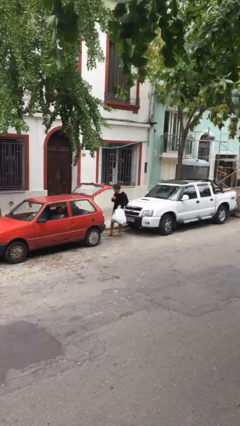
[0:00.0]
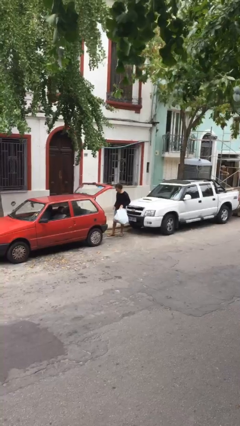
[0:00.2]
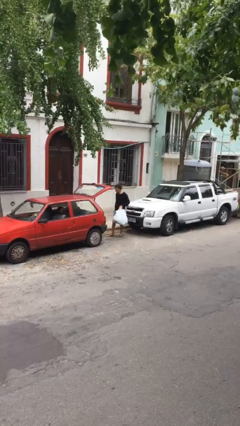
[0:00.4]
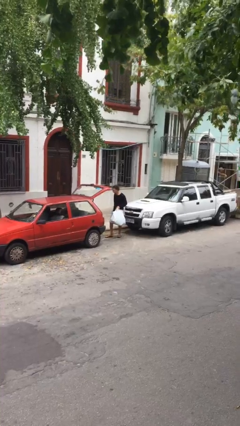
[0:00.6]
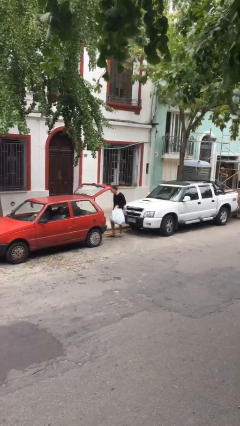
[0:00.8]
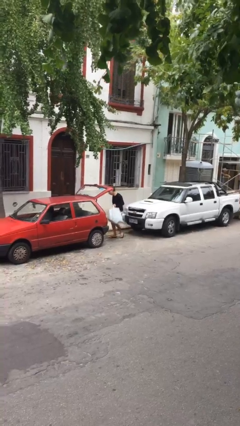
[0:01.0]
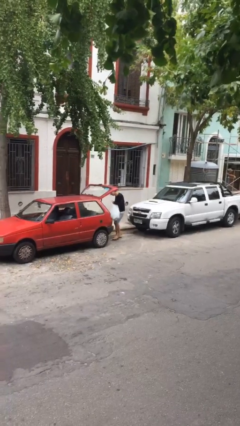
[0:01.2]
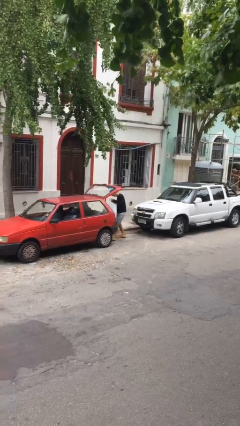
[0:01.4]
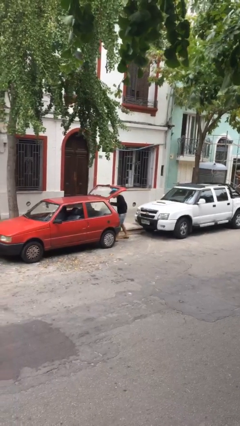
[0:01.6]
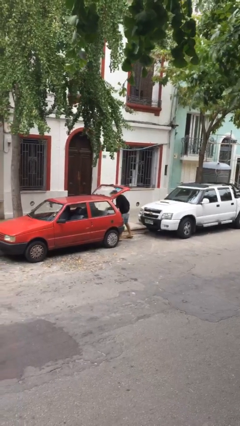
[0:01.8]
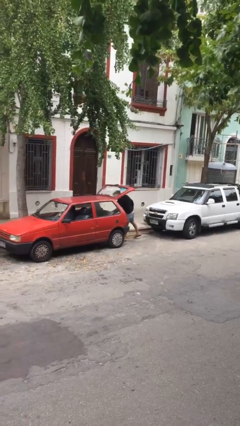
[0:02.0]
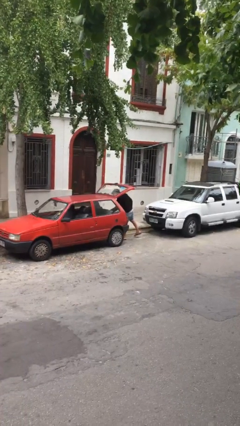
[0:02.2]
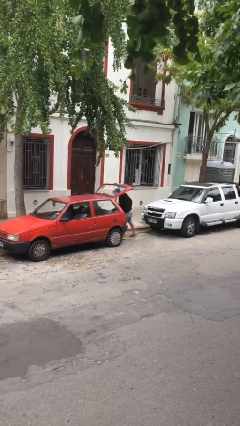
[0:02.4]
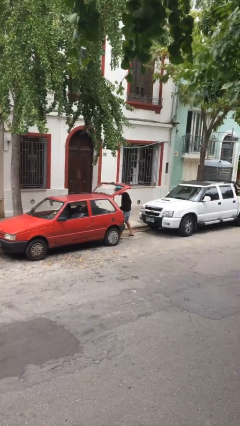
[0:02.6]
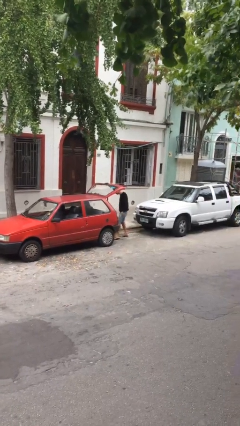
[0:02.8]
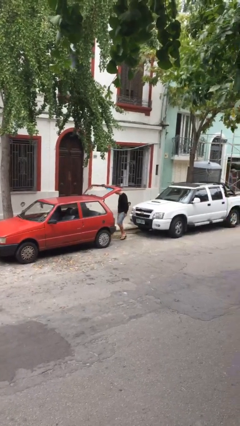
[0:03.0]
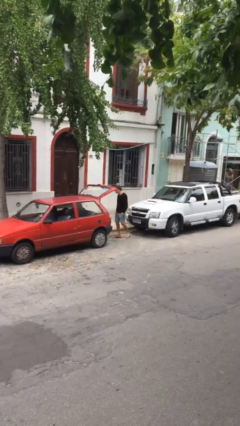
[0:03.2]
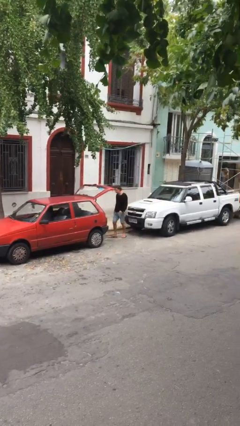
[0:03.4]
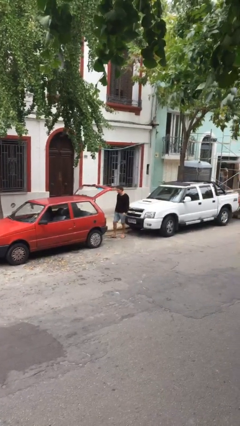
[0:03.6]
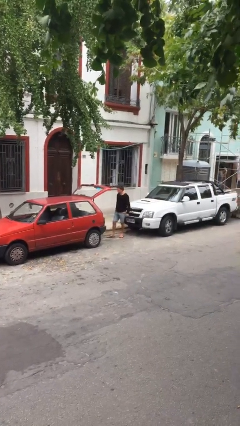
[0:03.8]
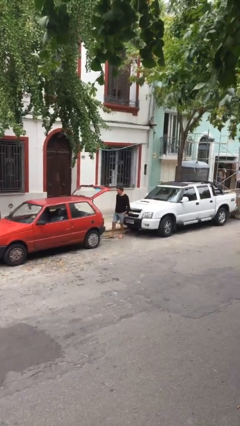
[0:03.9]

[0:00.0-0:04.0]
person loads car

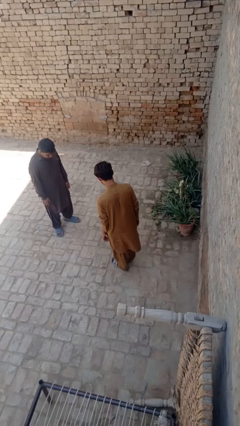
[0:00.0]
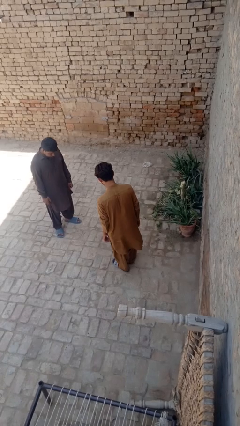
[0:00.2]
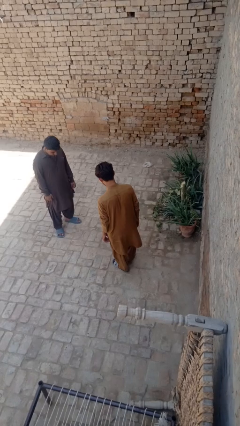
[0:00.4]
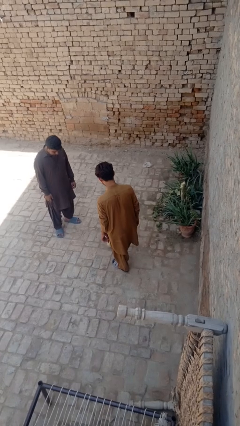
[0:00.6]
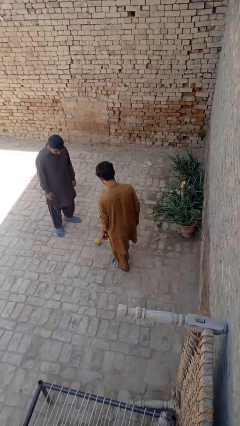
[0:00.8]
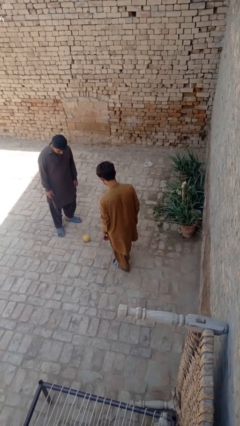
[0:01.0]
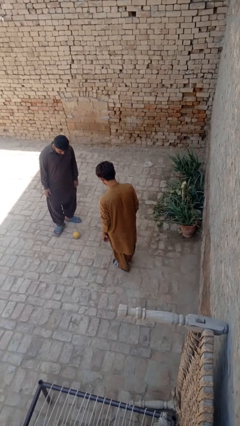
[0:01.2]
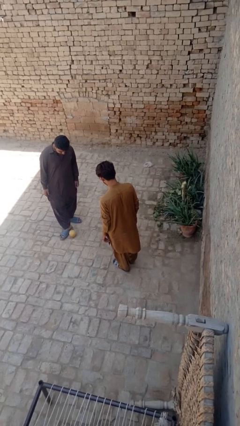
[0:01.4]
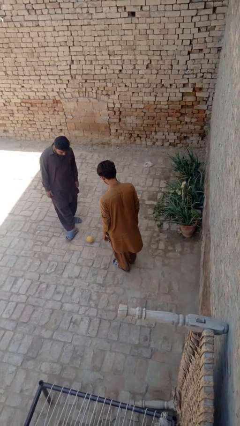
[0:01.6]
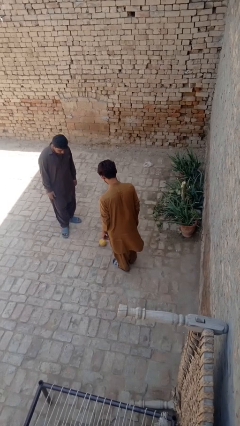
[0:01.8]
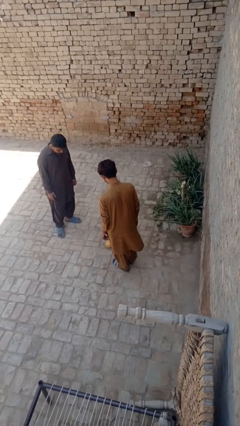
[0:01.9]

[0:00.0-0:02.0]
person kicks object to person

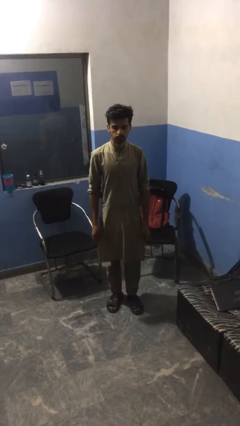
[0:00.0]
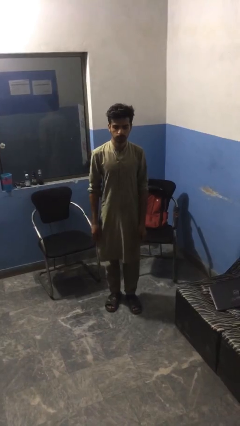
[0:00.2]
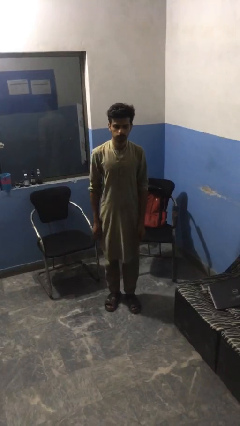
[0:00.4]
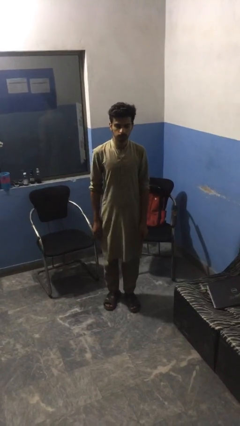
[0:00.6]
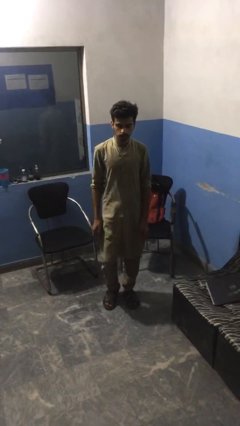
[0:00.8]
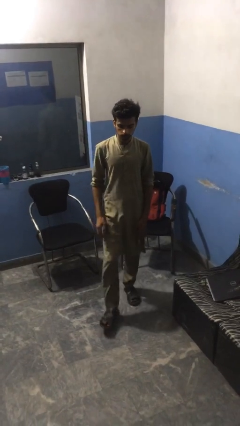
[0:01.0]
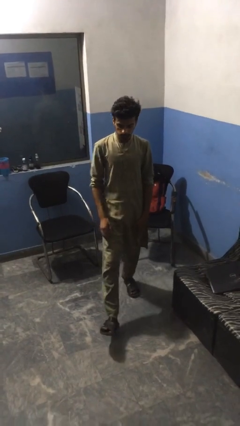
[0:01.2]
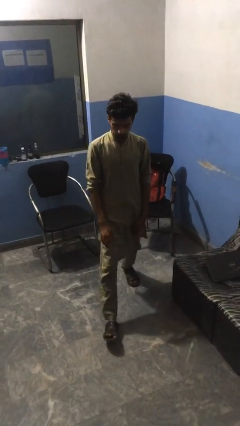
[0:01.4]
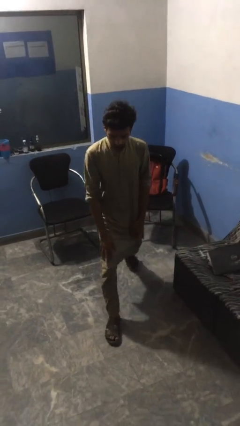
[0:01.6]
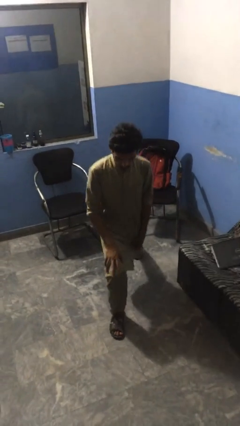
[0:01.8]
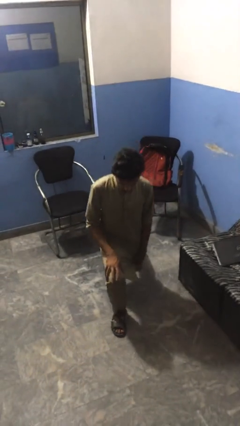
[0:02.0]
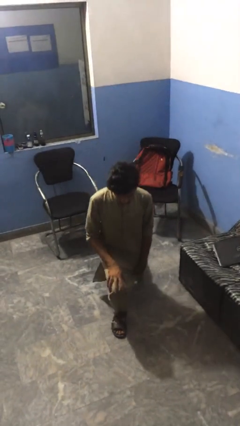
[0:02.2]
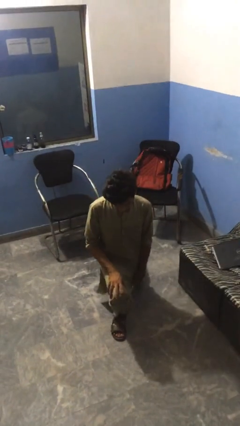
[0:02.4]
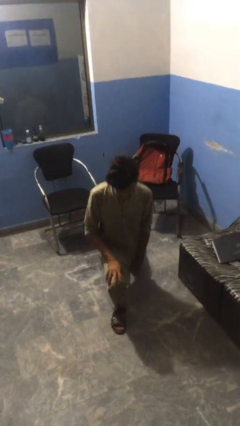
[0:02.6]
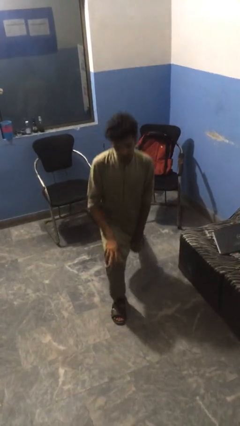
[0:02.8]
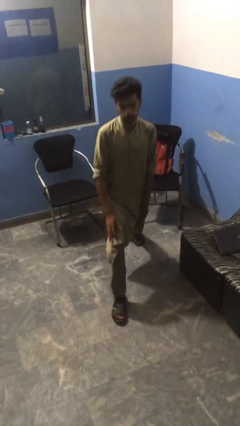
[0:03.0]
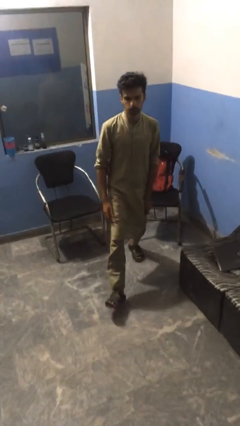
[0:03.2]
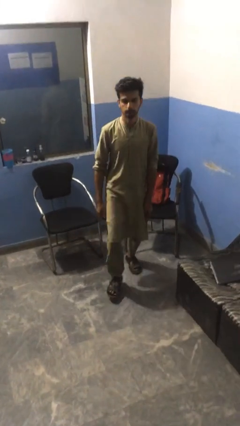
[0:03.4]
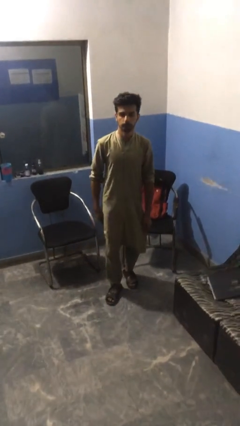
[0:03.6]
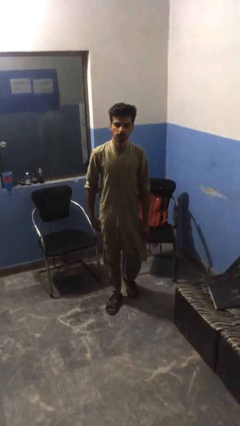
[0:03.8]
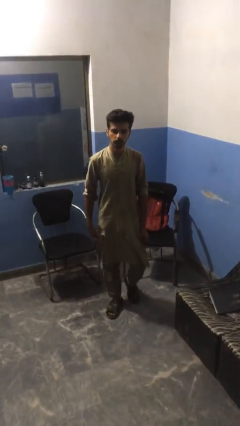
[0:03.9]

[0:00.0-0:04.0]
person exercises with lunges

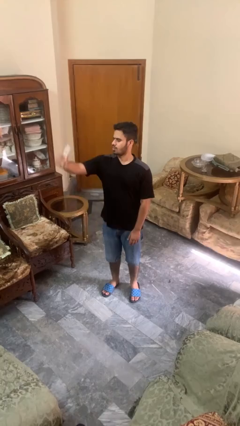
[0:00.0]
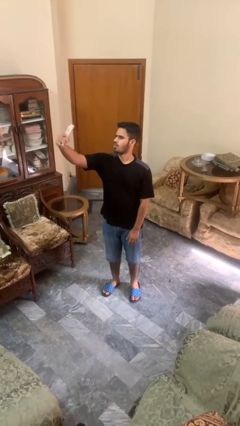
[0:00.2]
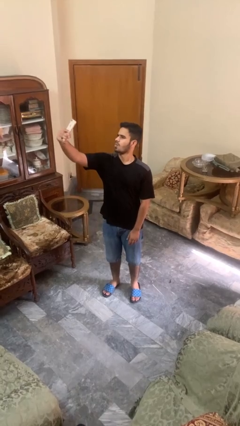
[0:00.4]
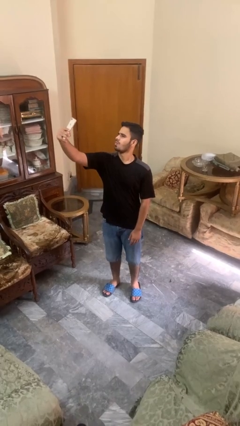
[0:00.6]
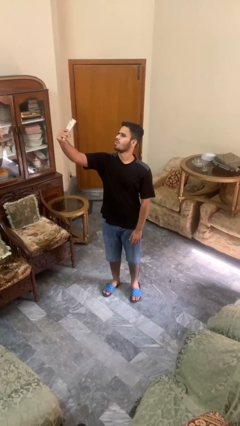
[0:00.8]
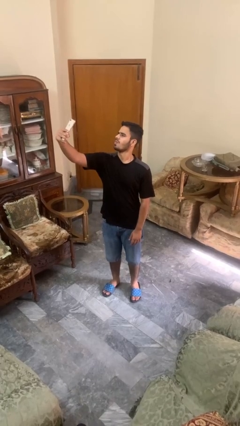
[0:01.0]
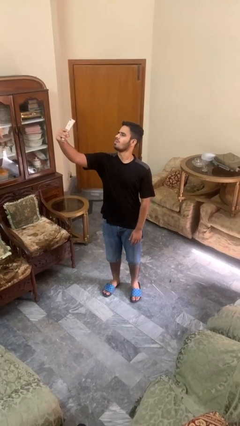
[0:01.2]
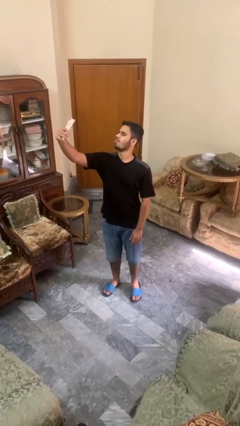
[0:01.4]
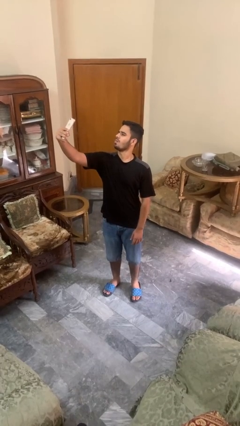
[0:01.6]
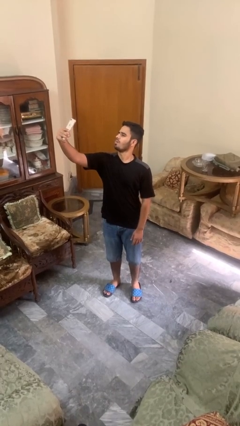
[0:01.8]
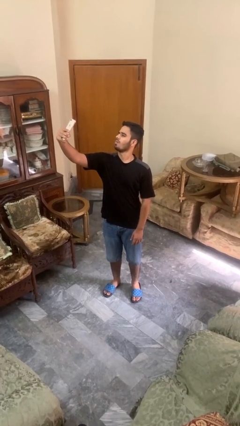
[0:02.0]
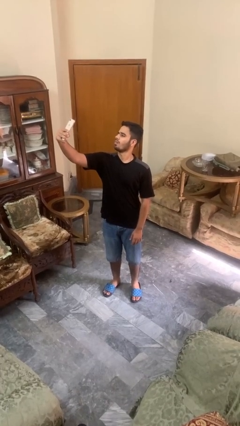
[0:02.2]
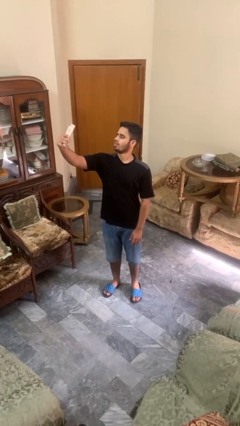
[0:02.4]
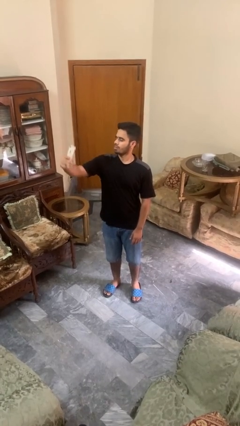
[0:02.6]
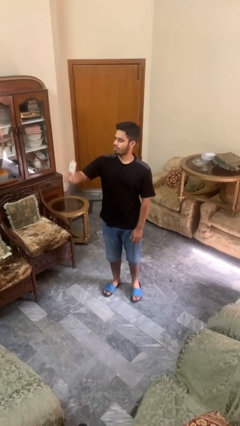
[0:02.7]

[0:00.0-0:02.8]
person takes selfie

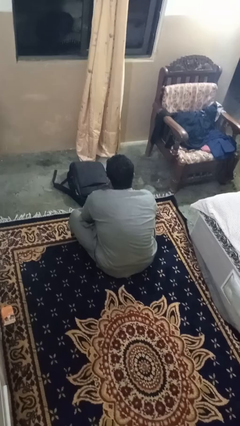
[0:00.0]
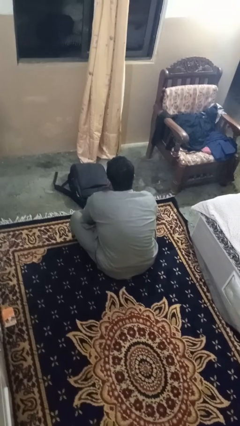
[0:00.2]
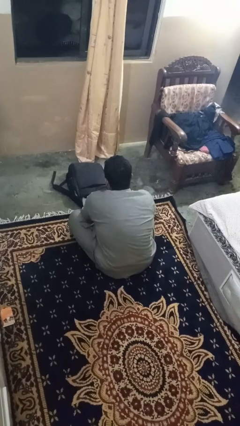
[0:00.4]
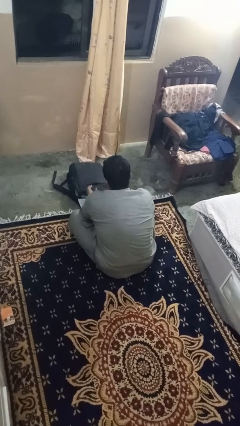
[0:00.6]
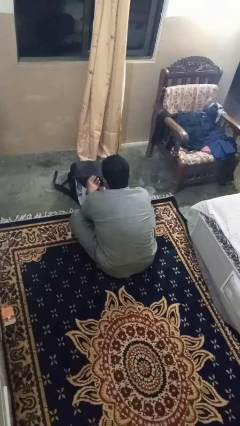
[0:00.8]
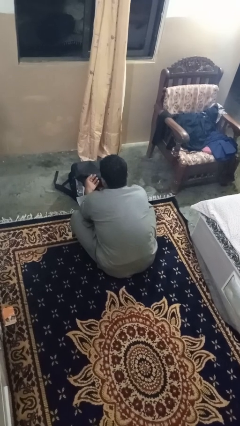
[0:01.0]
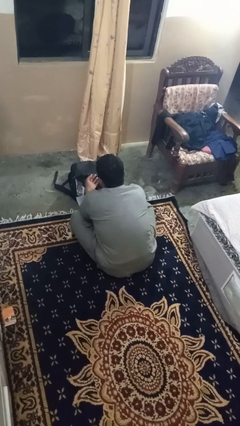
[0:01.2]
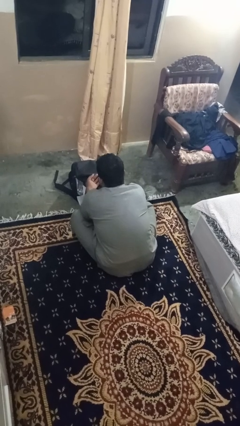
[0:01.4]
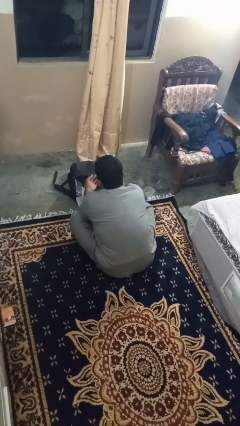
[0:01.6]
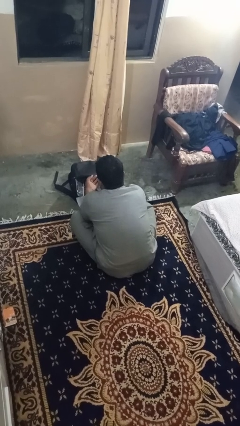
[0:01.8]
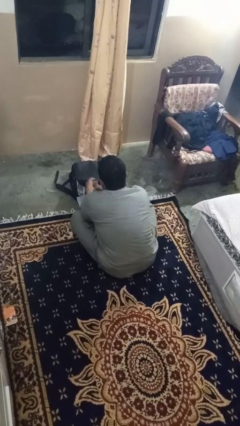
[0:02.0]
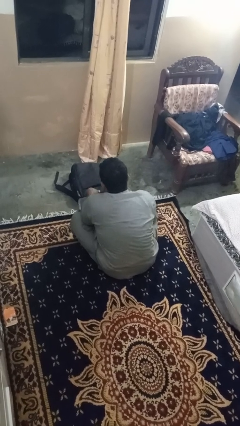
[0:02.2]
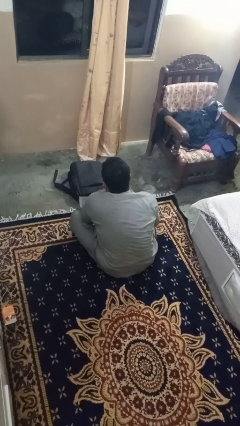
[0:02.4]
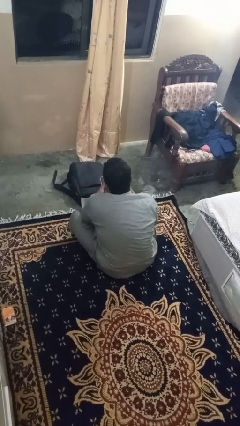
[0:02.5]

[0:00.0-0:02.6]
person takes object from bag

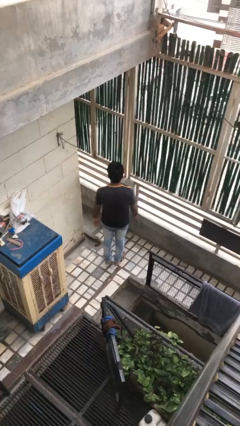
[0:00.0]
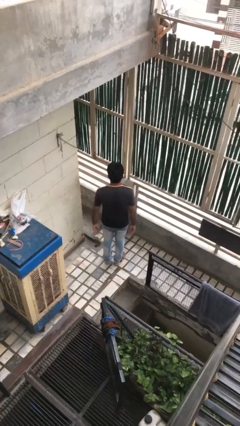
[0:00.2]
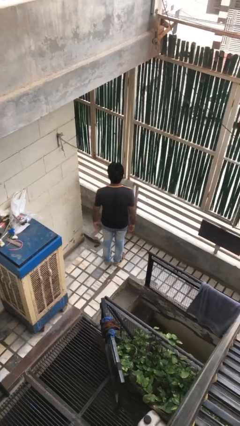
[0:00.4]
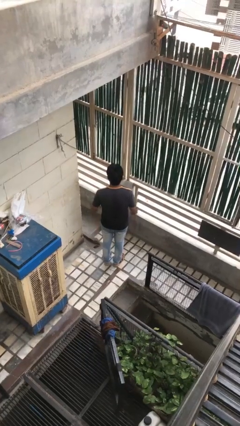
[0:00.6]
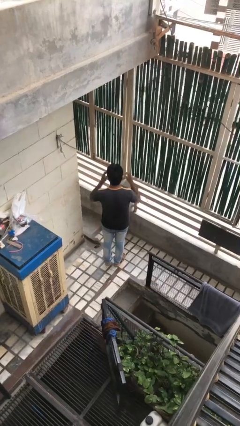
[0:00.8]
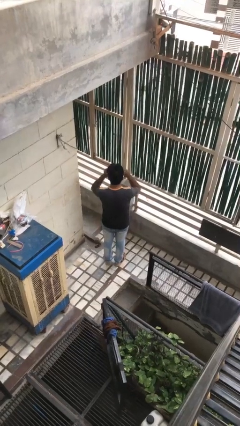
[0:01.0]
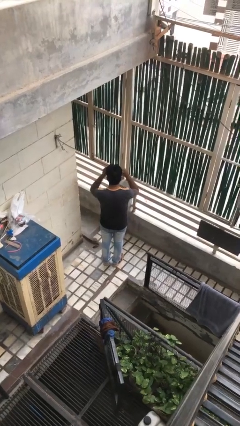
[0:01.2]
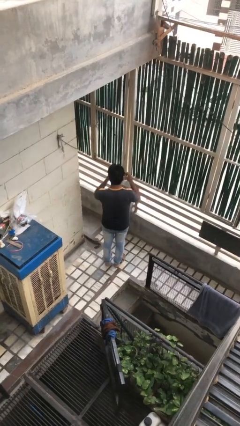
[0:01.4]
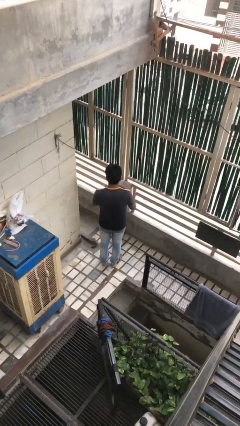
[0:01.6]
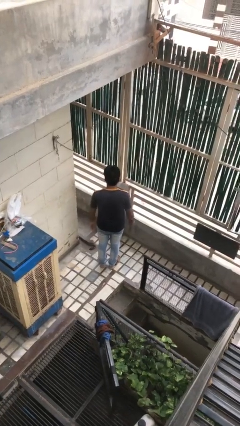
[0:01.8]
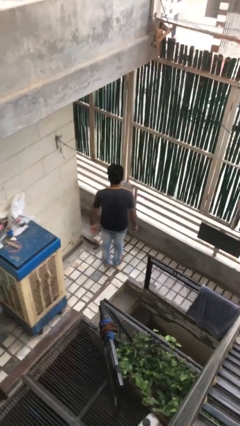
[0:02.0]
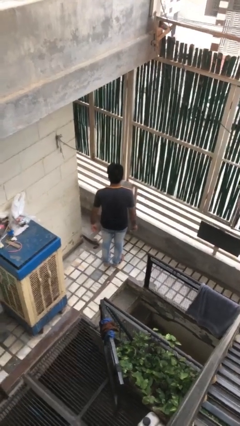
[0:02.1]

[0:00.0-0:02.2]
person takes off glasses
